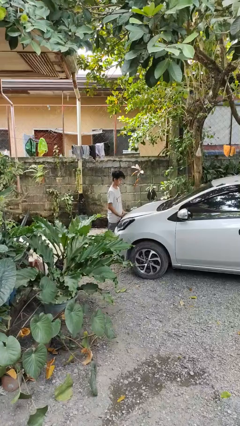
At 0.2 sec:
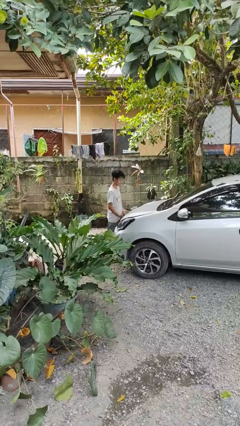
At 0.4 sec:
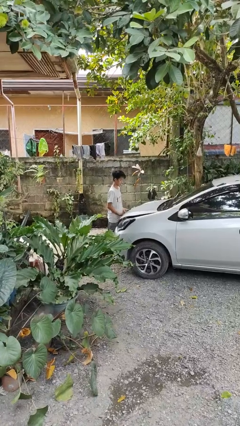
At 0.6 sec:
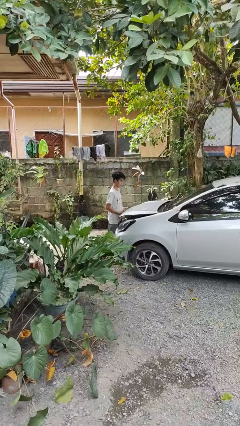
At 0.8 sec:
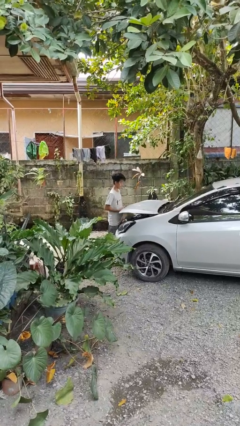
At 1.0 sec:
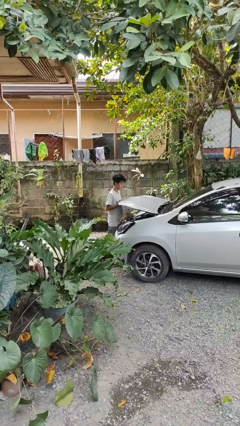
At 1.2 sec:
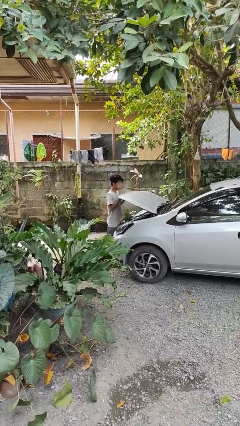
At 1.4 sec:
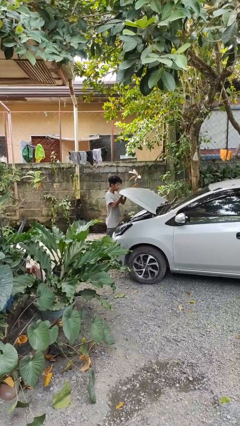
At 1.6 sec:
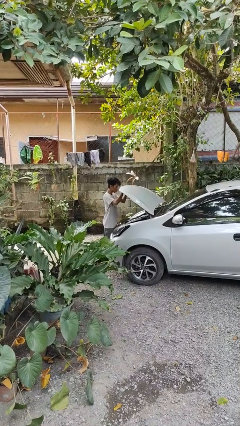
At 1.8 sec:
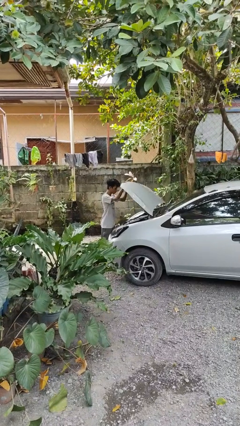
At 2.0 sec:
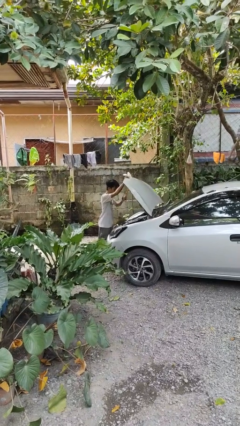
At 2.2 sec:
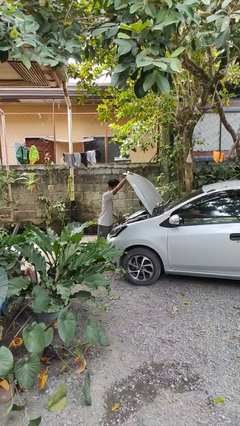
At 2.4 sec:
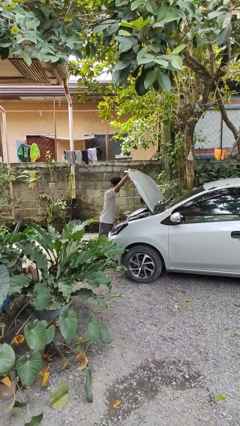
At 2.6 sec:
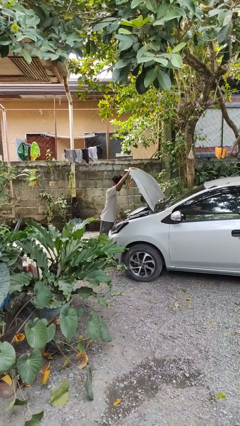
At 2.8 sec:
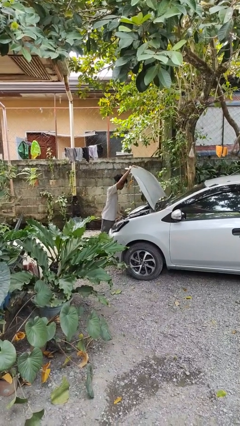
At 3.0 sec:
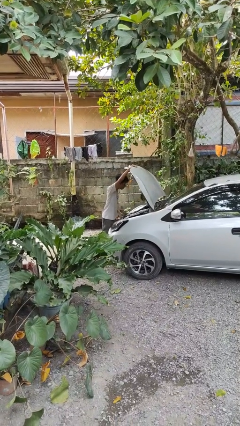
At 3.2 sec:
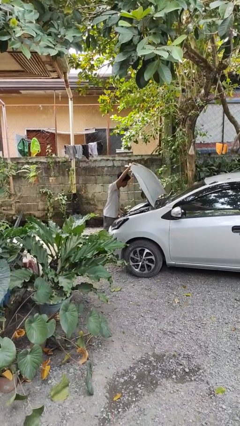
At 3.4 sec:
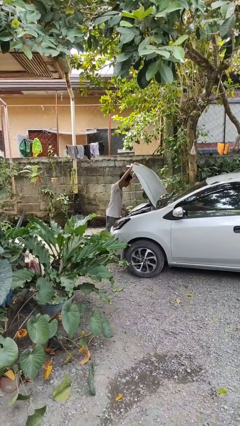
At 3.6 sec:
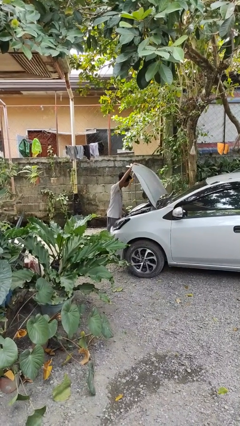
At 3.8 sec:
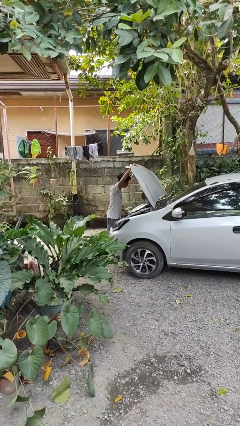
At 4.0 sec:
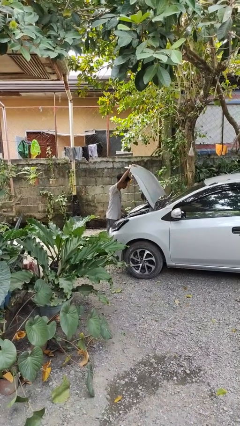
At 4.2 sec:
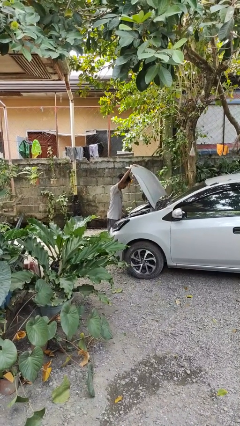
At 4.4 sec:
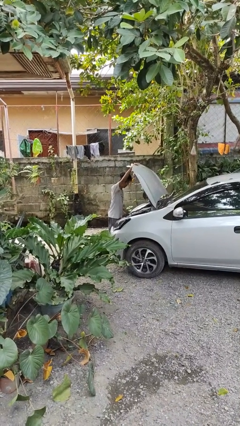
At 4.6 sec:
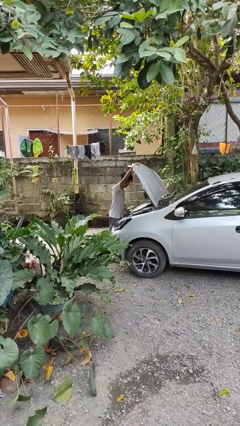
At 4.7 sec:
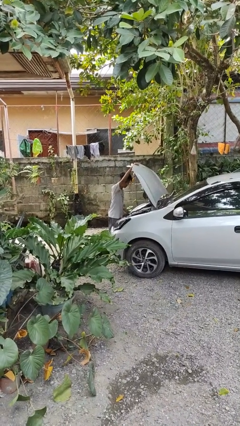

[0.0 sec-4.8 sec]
person opens car hood

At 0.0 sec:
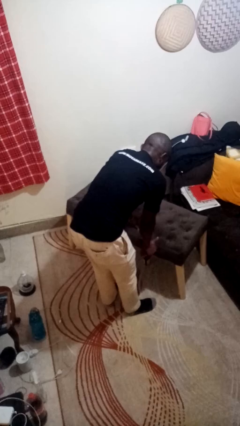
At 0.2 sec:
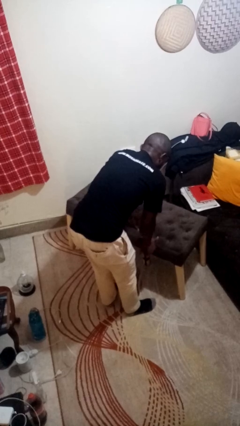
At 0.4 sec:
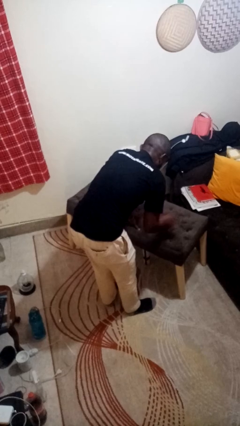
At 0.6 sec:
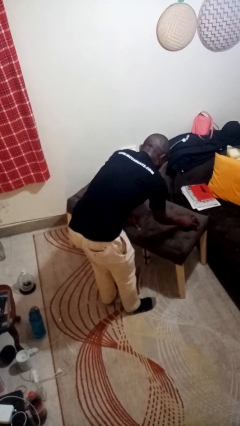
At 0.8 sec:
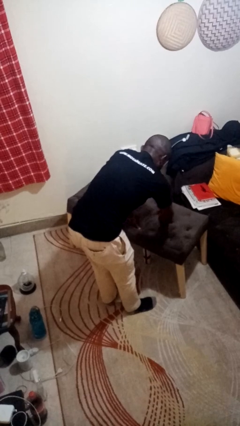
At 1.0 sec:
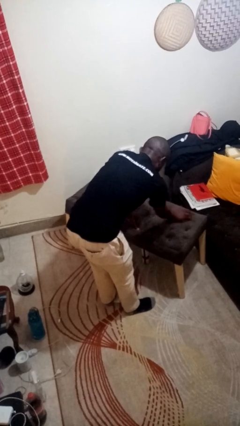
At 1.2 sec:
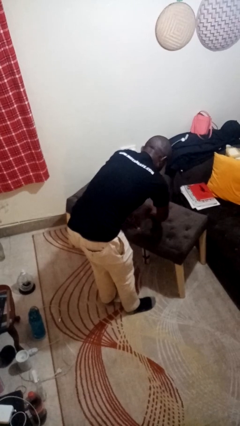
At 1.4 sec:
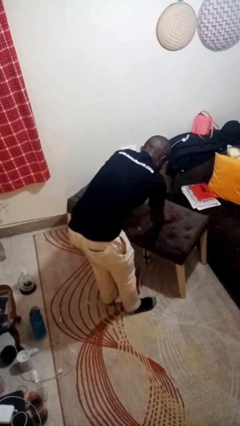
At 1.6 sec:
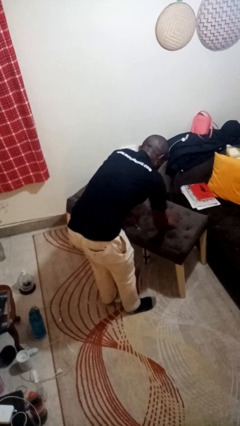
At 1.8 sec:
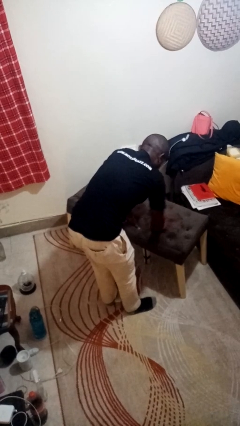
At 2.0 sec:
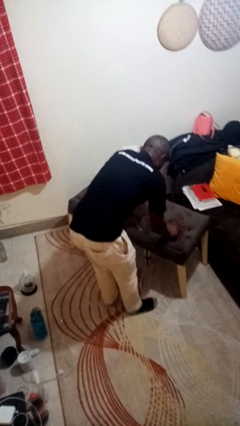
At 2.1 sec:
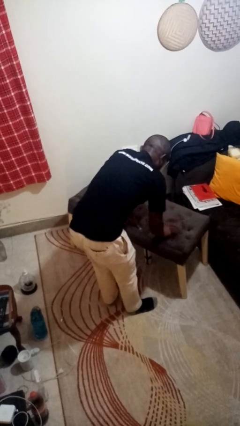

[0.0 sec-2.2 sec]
person cleans table with rag

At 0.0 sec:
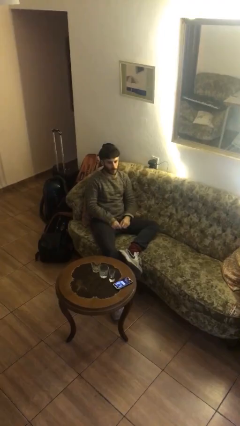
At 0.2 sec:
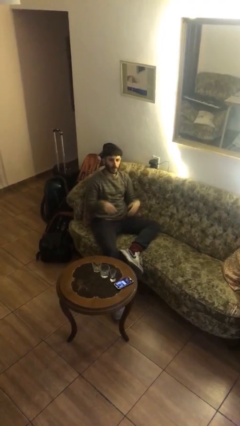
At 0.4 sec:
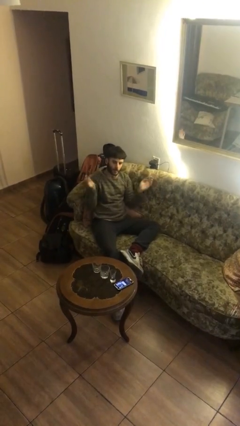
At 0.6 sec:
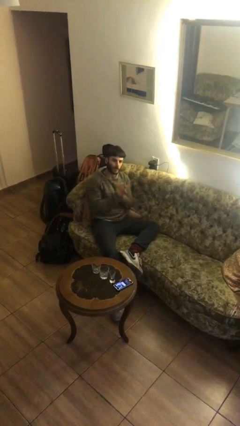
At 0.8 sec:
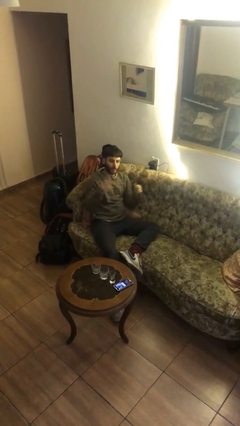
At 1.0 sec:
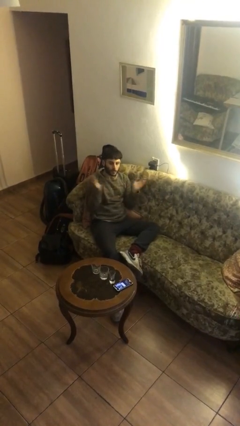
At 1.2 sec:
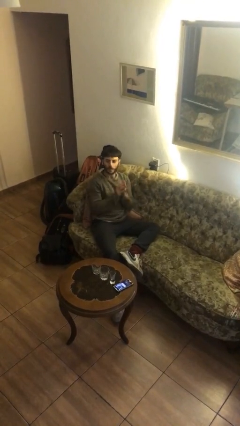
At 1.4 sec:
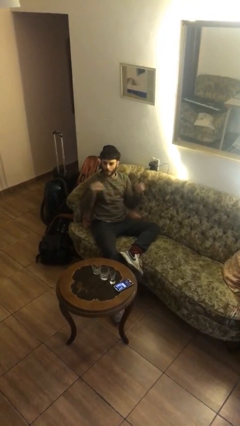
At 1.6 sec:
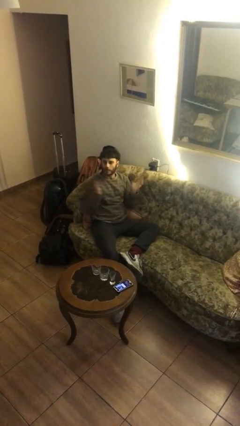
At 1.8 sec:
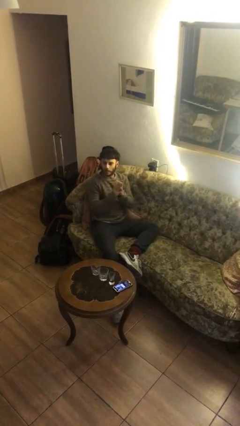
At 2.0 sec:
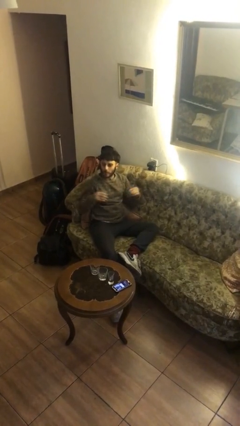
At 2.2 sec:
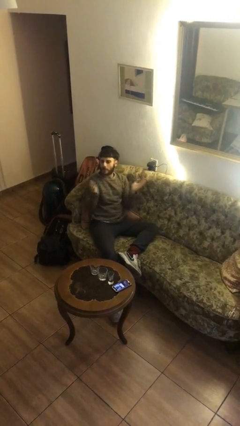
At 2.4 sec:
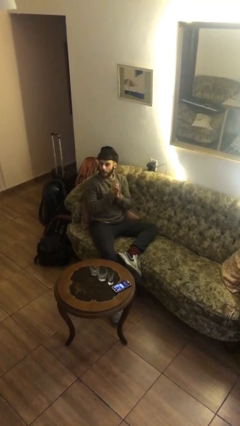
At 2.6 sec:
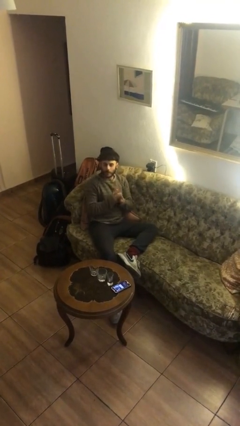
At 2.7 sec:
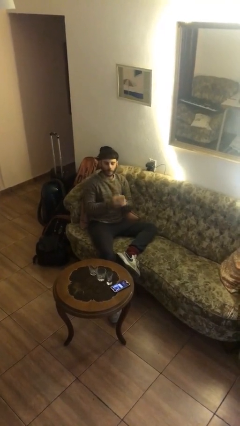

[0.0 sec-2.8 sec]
person claps hands

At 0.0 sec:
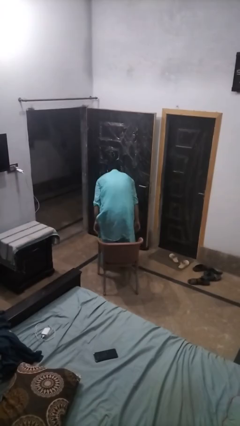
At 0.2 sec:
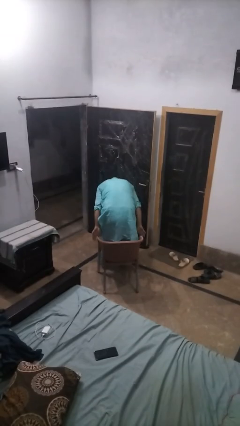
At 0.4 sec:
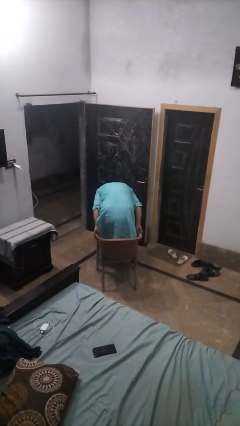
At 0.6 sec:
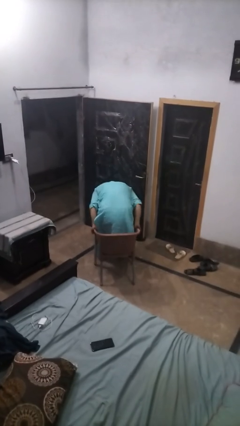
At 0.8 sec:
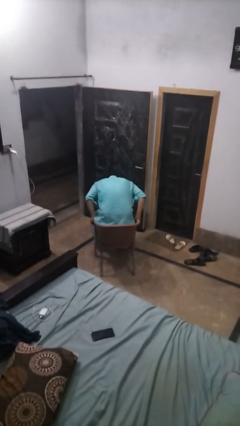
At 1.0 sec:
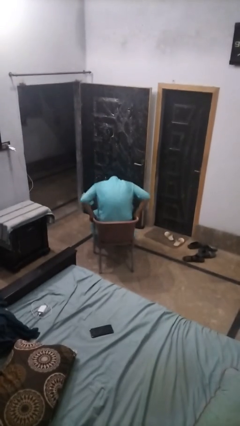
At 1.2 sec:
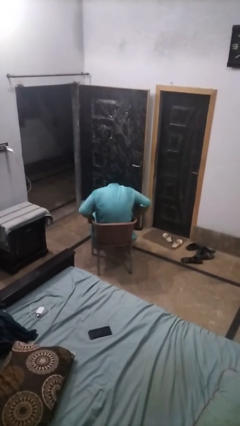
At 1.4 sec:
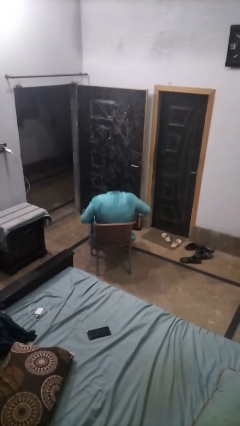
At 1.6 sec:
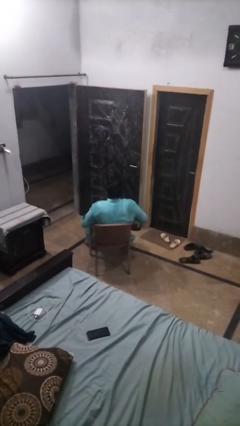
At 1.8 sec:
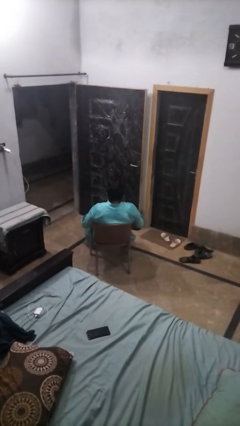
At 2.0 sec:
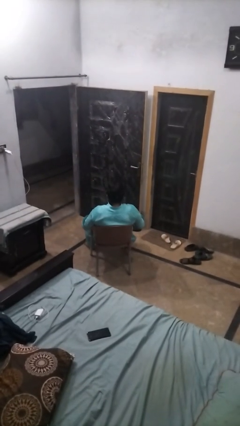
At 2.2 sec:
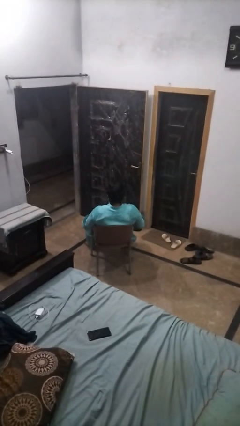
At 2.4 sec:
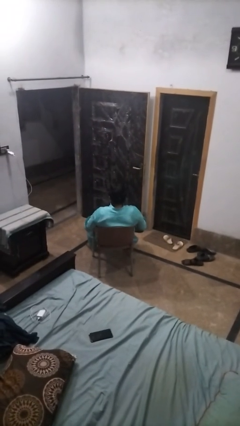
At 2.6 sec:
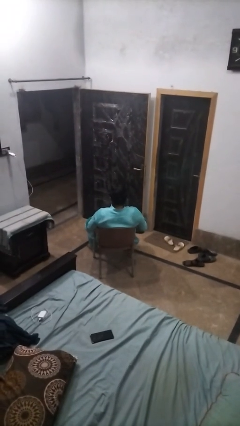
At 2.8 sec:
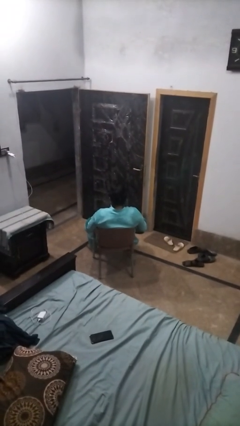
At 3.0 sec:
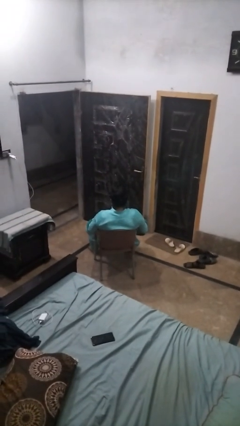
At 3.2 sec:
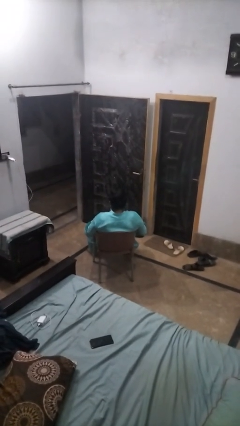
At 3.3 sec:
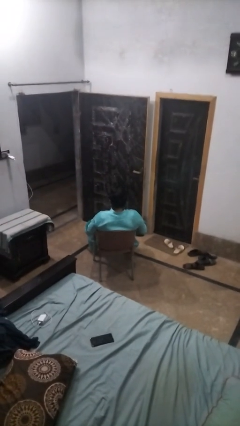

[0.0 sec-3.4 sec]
person sits down

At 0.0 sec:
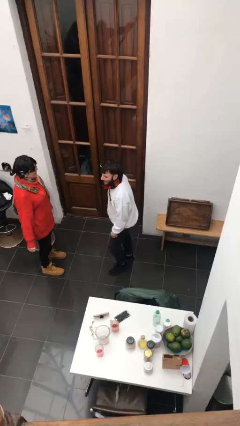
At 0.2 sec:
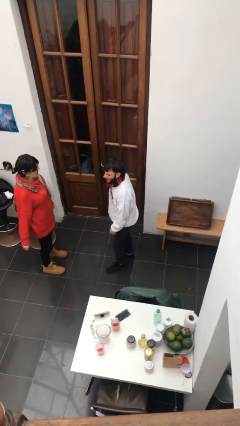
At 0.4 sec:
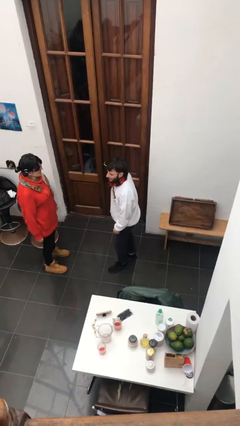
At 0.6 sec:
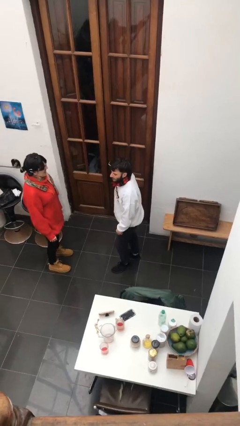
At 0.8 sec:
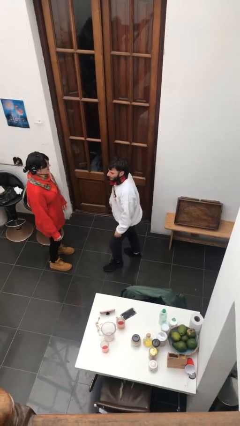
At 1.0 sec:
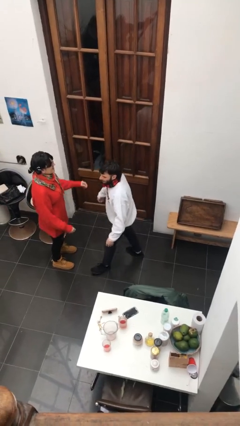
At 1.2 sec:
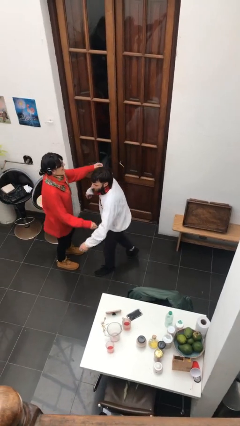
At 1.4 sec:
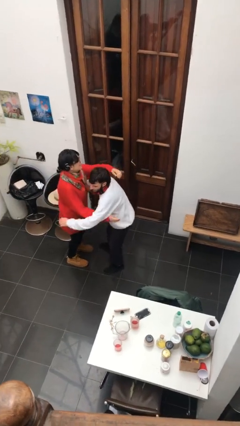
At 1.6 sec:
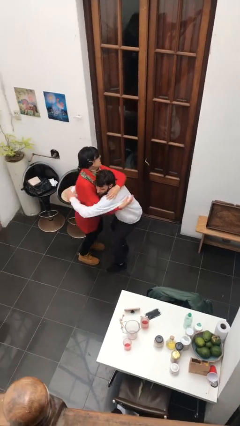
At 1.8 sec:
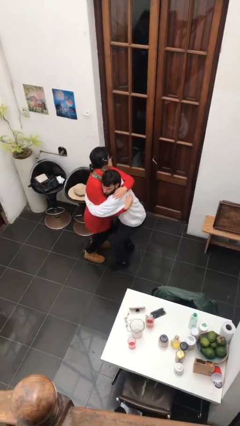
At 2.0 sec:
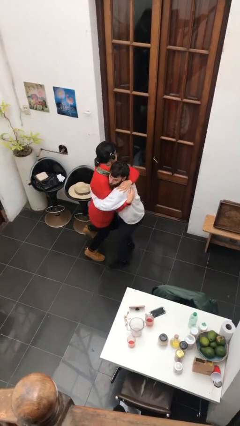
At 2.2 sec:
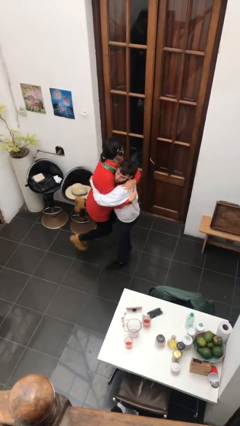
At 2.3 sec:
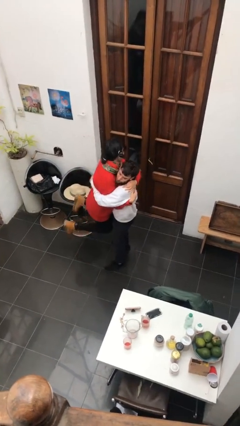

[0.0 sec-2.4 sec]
person picks up person

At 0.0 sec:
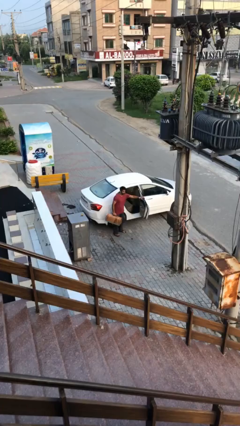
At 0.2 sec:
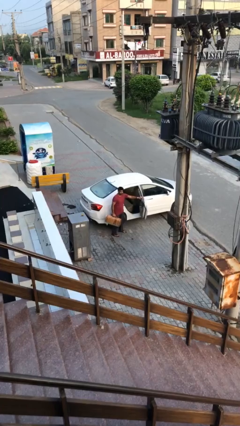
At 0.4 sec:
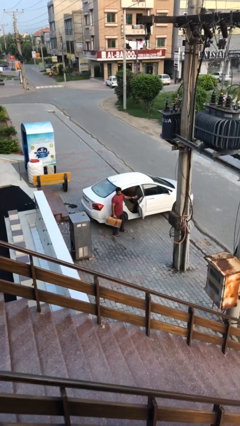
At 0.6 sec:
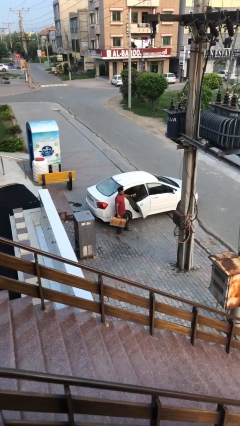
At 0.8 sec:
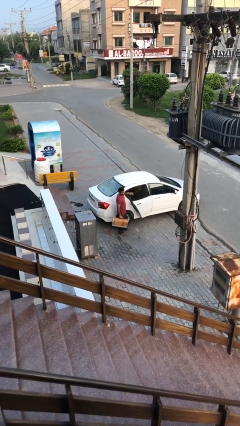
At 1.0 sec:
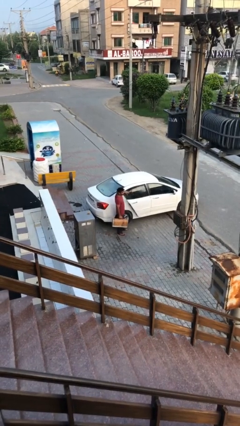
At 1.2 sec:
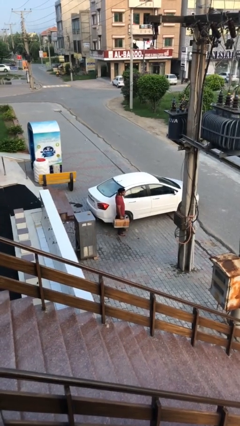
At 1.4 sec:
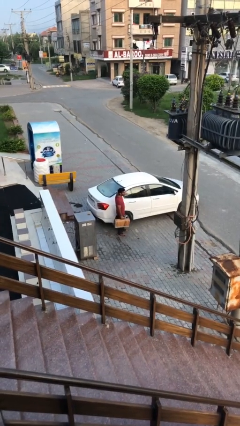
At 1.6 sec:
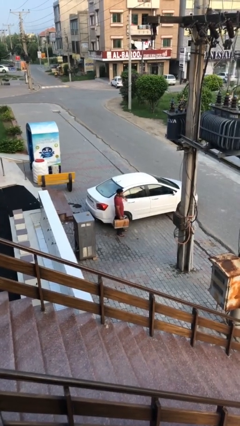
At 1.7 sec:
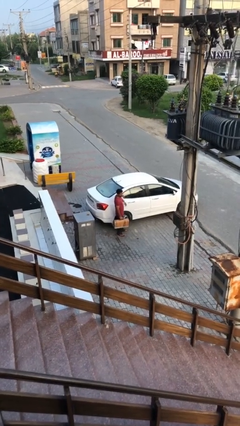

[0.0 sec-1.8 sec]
person closes car door
